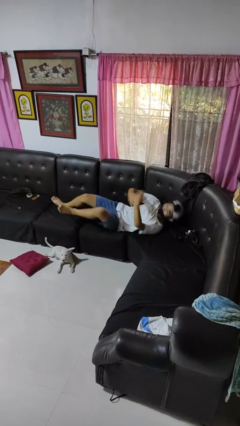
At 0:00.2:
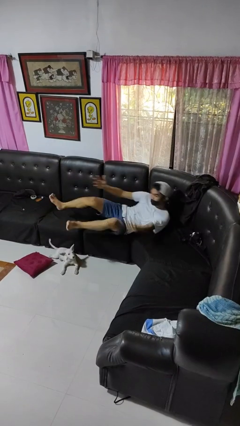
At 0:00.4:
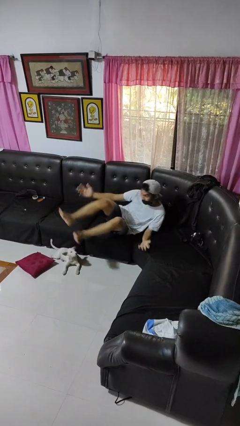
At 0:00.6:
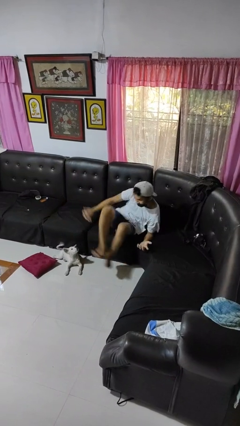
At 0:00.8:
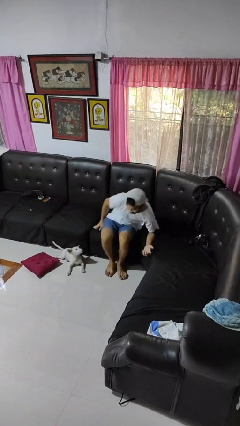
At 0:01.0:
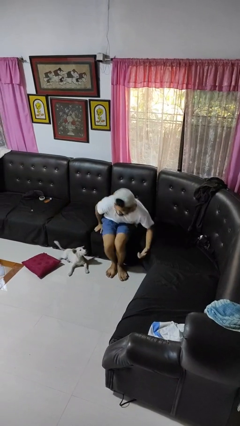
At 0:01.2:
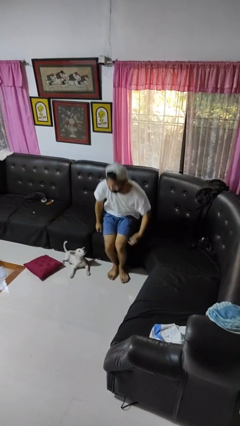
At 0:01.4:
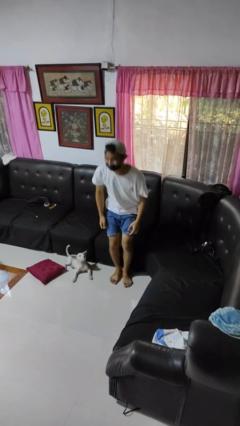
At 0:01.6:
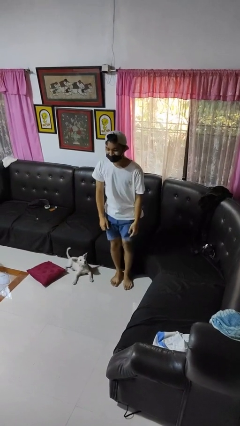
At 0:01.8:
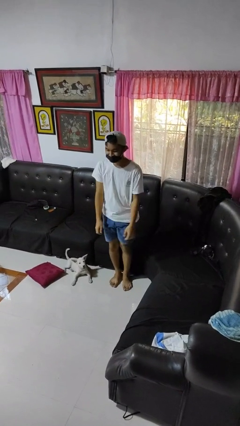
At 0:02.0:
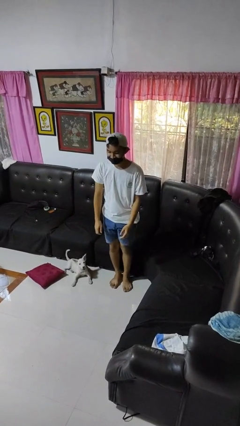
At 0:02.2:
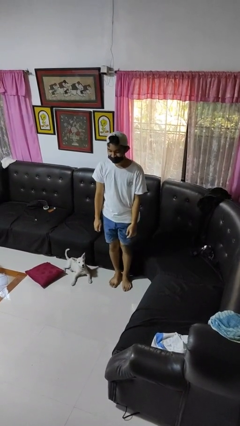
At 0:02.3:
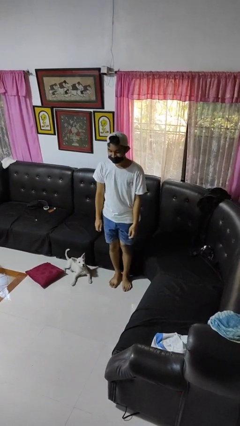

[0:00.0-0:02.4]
person stands up

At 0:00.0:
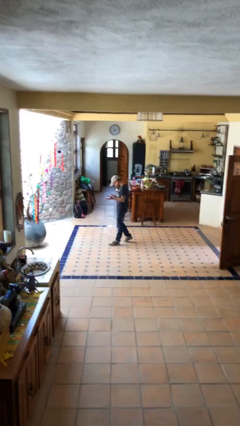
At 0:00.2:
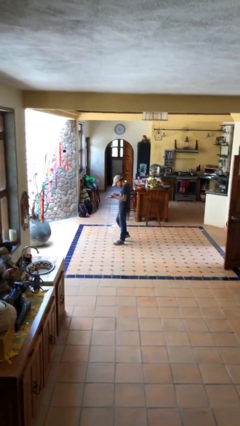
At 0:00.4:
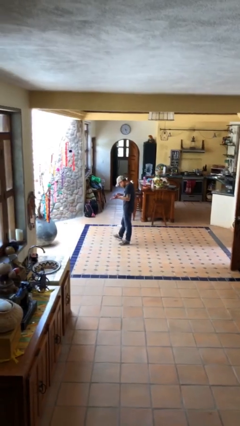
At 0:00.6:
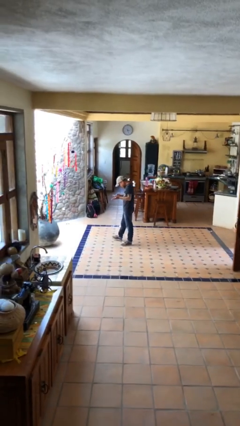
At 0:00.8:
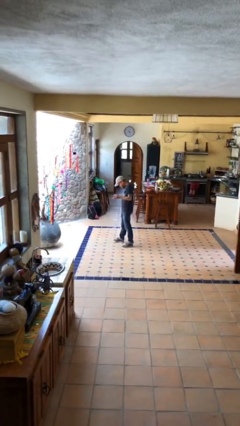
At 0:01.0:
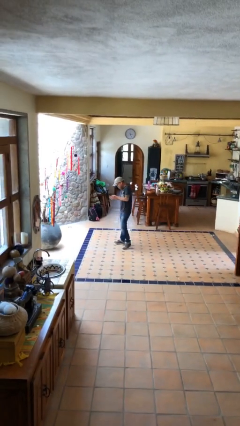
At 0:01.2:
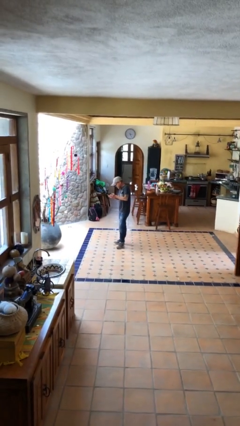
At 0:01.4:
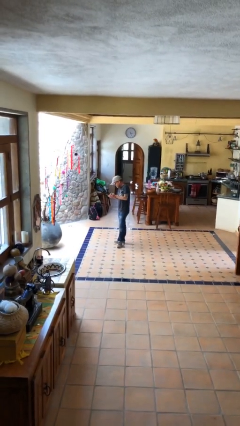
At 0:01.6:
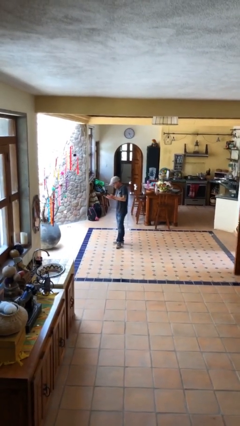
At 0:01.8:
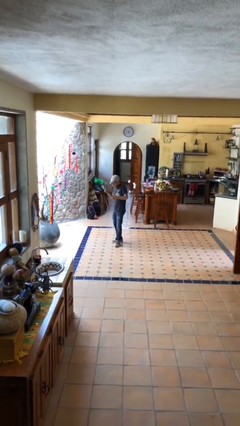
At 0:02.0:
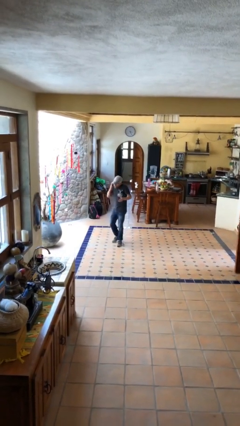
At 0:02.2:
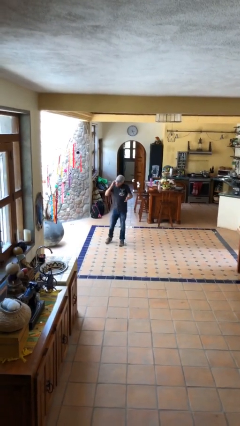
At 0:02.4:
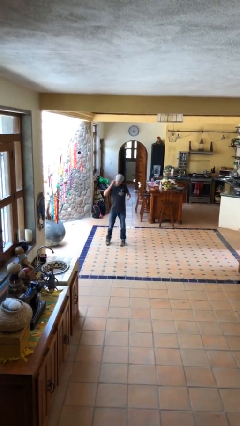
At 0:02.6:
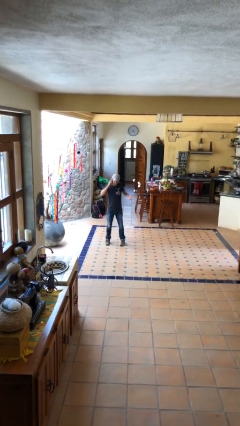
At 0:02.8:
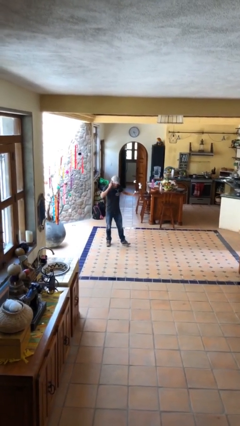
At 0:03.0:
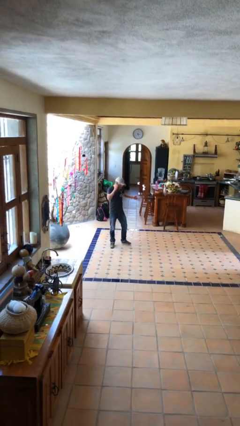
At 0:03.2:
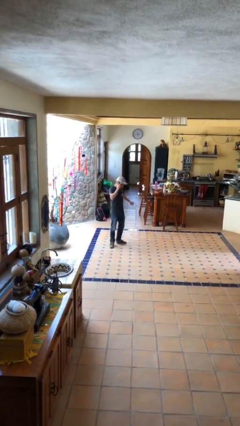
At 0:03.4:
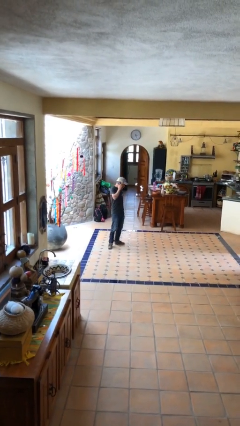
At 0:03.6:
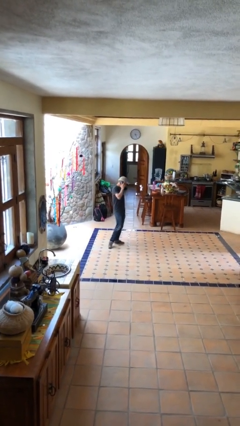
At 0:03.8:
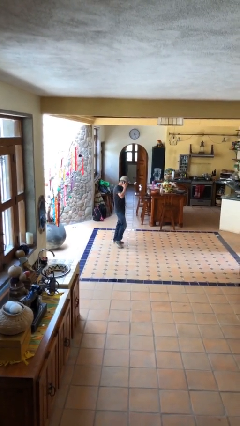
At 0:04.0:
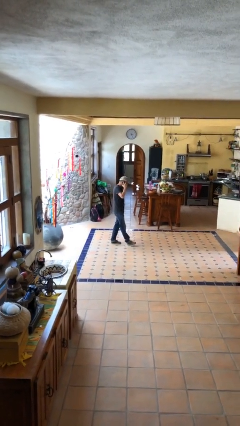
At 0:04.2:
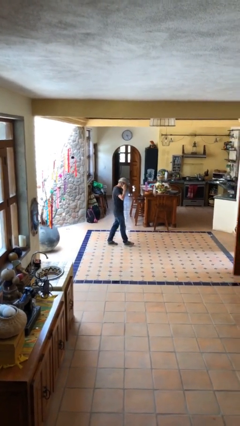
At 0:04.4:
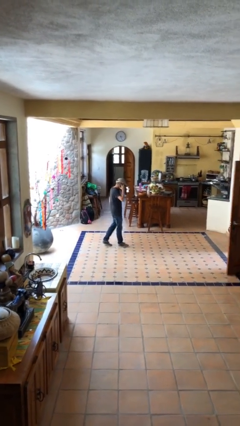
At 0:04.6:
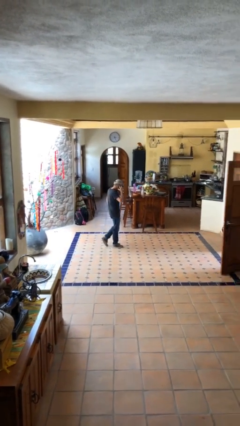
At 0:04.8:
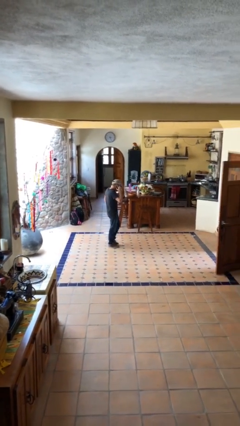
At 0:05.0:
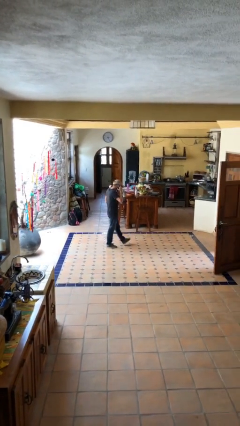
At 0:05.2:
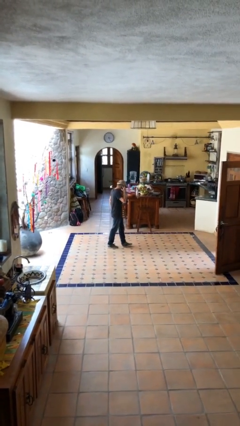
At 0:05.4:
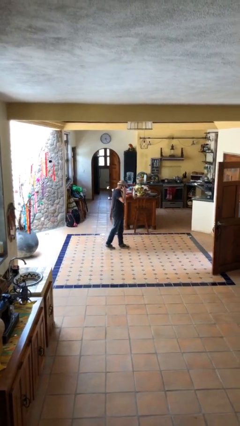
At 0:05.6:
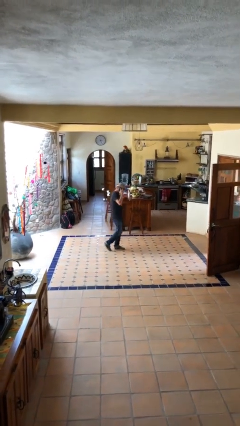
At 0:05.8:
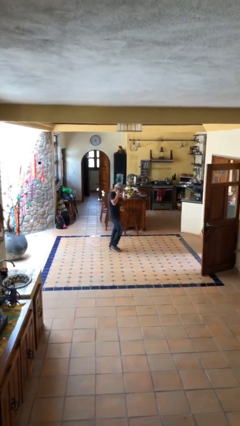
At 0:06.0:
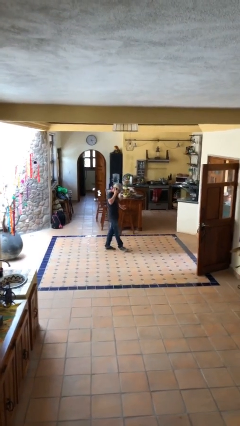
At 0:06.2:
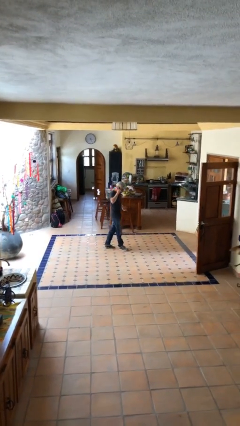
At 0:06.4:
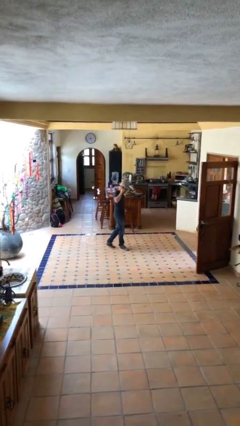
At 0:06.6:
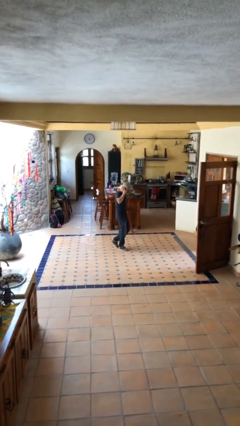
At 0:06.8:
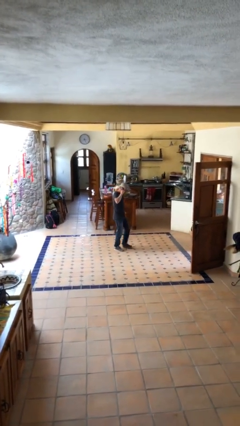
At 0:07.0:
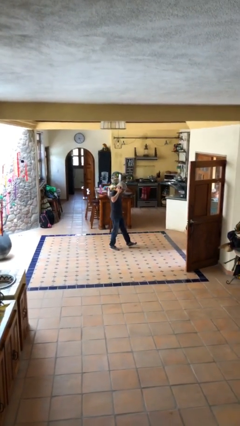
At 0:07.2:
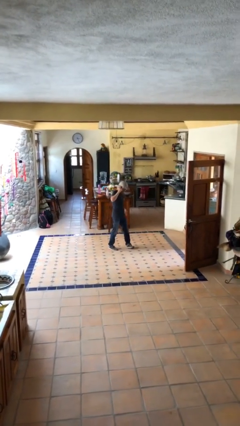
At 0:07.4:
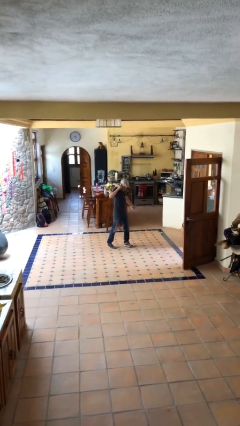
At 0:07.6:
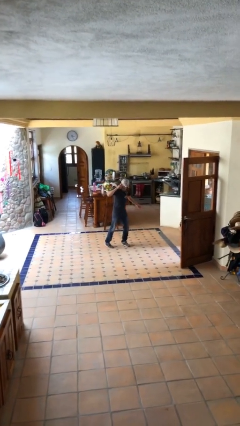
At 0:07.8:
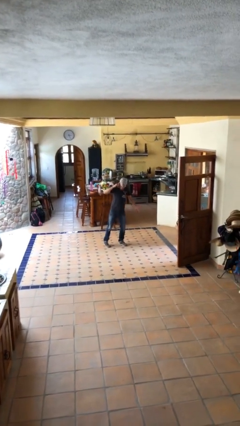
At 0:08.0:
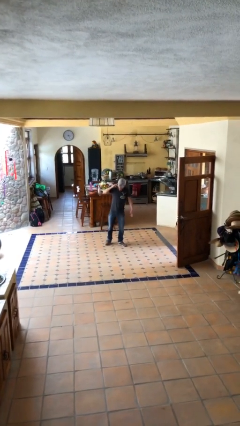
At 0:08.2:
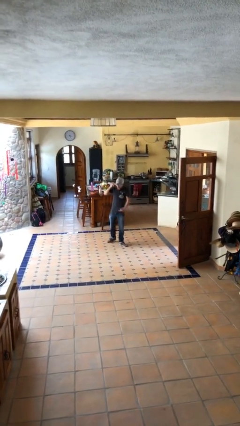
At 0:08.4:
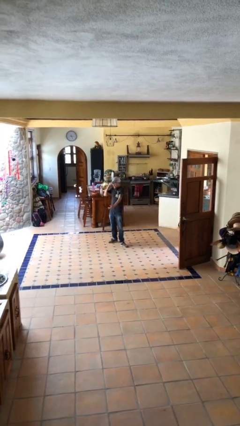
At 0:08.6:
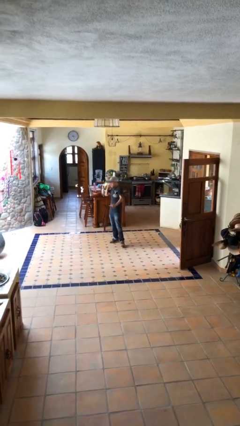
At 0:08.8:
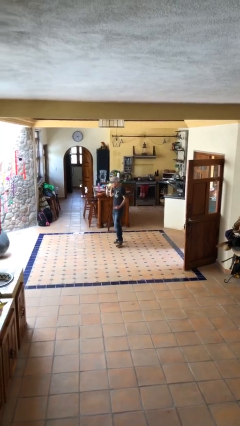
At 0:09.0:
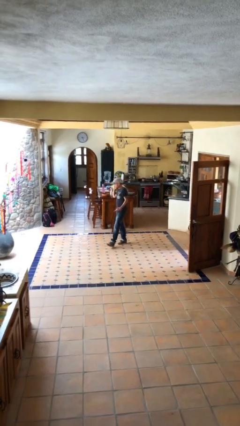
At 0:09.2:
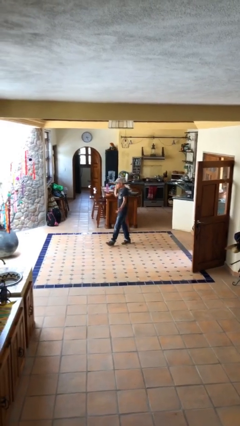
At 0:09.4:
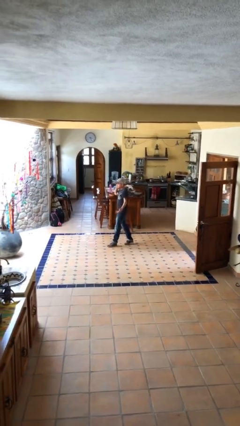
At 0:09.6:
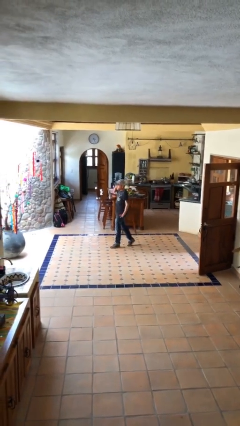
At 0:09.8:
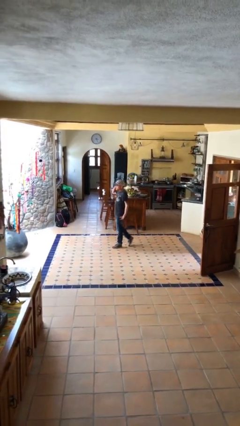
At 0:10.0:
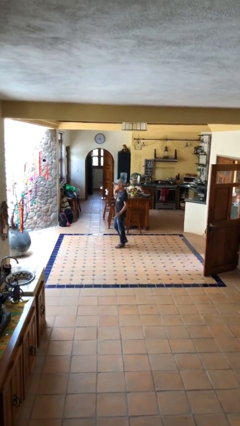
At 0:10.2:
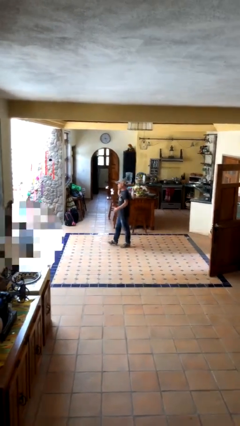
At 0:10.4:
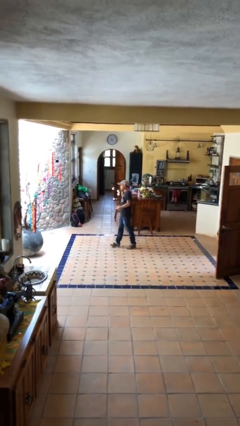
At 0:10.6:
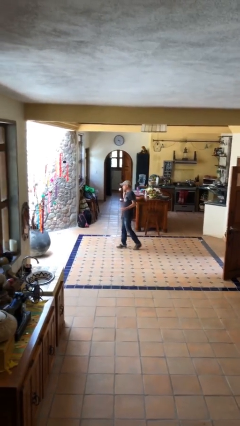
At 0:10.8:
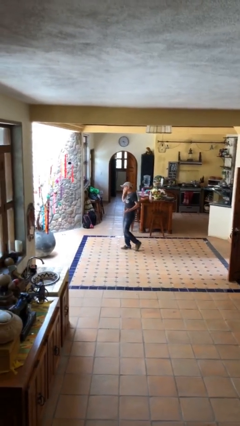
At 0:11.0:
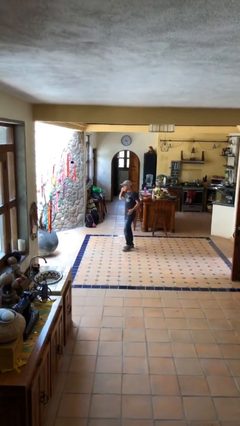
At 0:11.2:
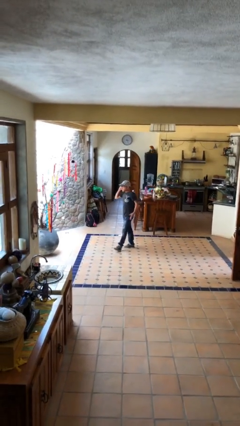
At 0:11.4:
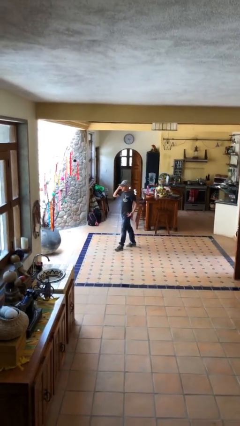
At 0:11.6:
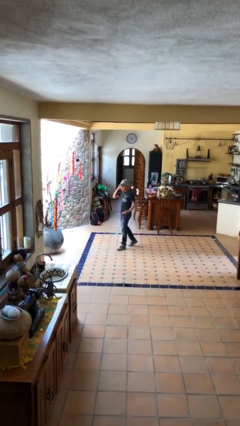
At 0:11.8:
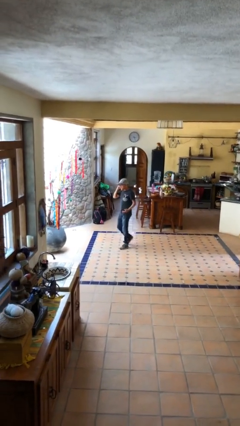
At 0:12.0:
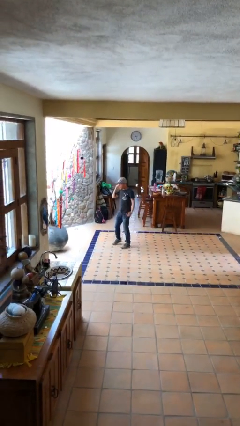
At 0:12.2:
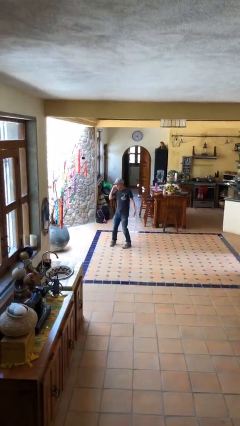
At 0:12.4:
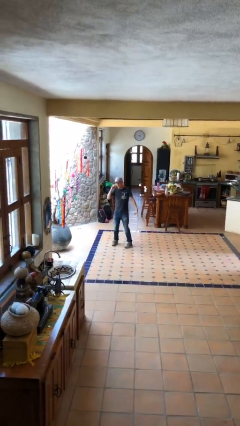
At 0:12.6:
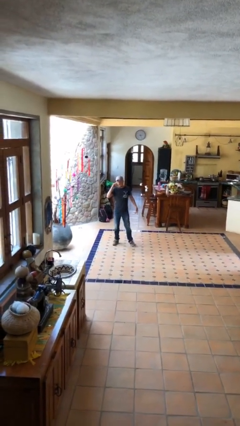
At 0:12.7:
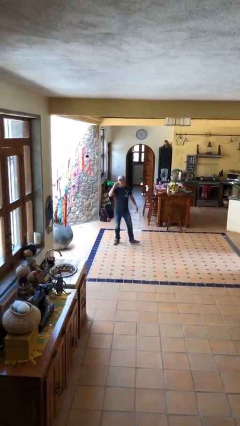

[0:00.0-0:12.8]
person talks on phone

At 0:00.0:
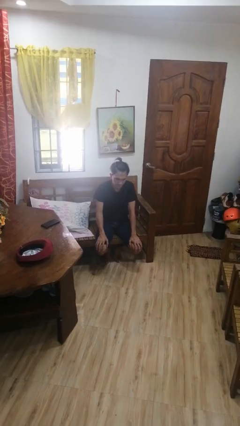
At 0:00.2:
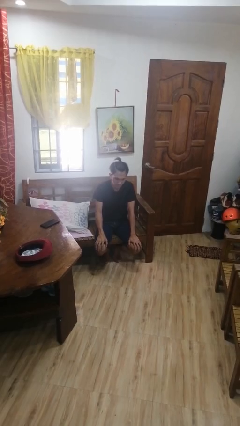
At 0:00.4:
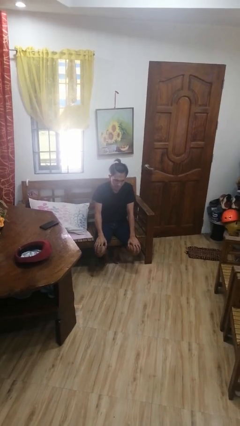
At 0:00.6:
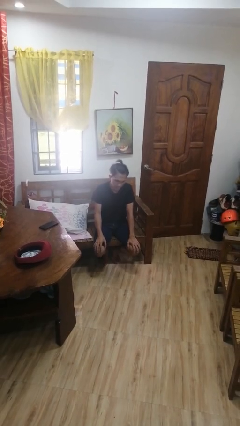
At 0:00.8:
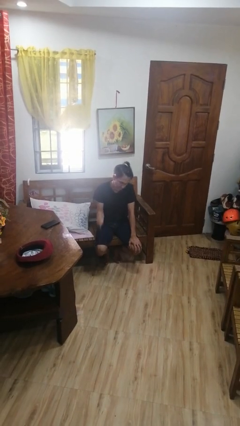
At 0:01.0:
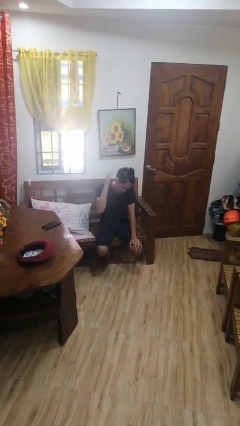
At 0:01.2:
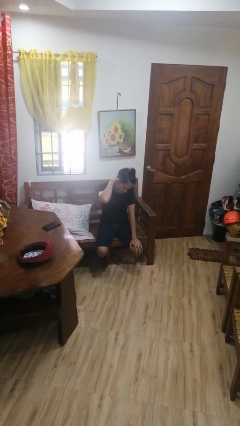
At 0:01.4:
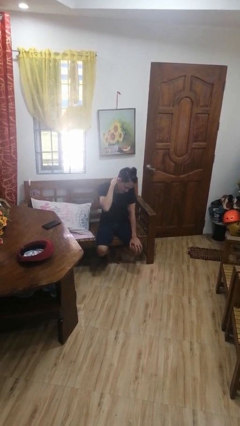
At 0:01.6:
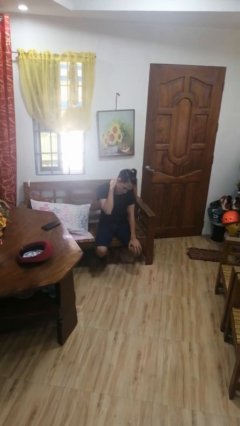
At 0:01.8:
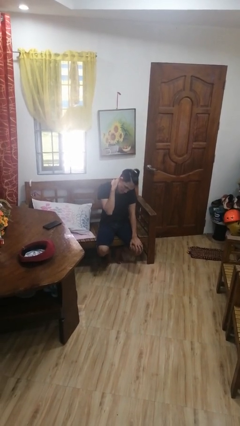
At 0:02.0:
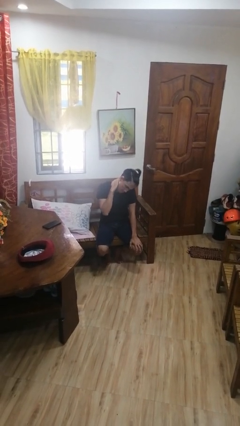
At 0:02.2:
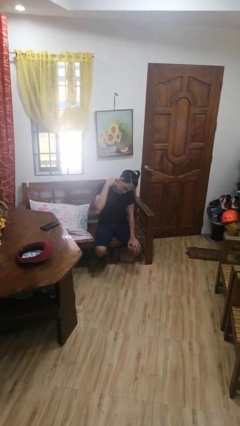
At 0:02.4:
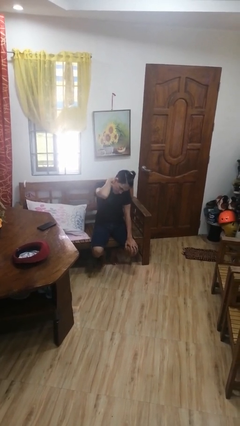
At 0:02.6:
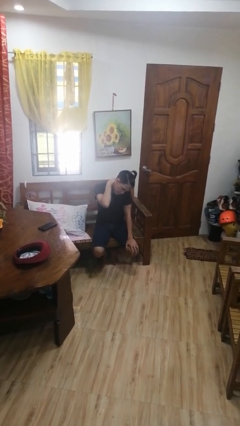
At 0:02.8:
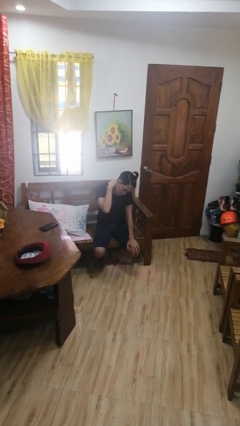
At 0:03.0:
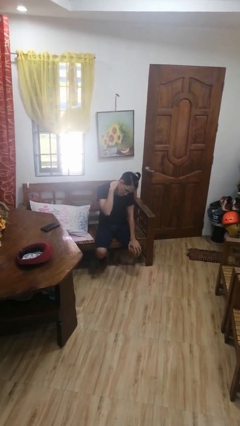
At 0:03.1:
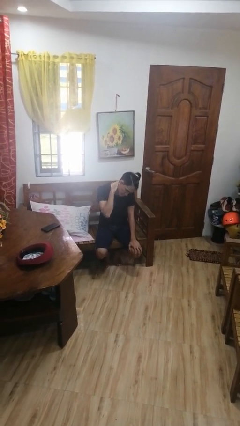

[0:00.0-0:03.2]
person rubs neck
